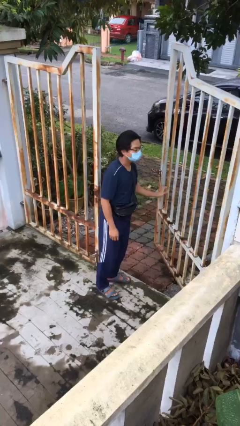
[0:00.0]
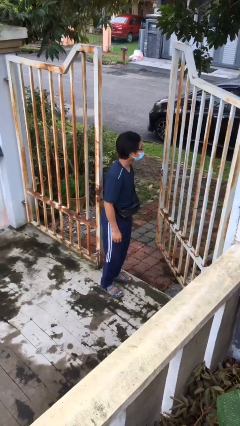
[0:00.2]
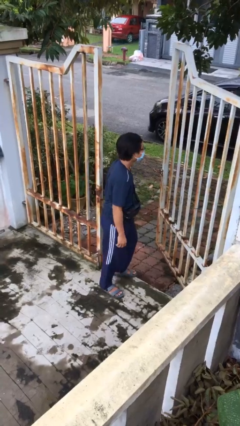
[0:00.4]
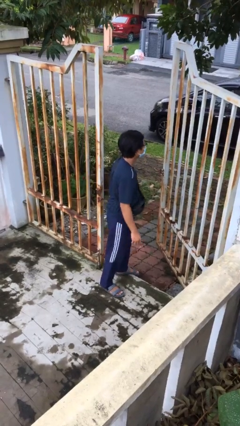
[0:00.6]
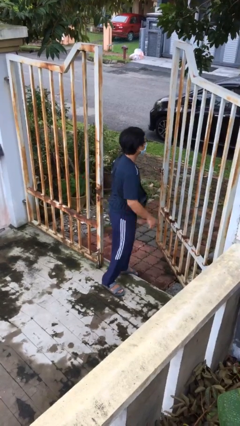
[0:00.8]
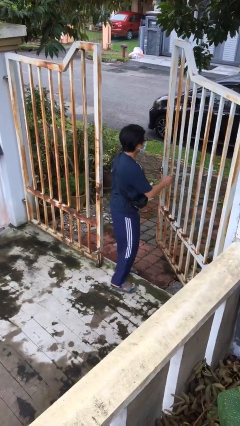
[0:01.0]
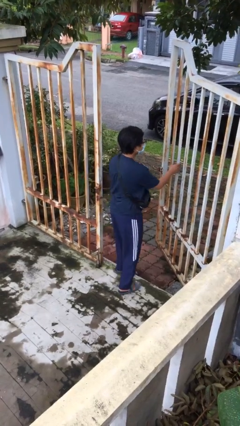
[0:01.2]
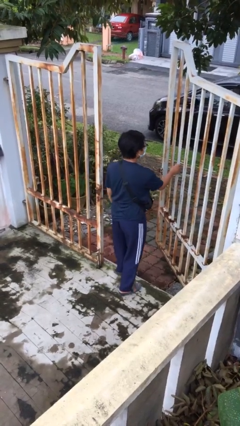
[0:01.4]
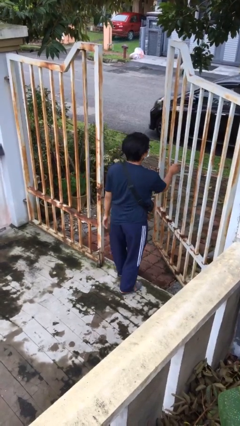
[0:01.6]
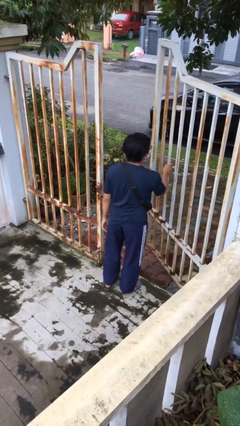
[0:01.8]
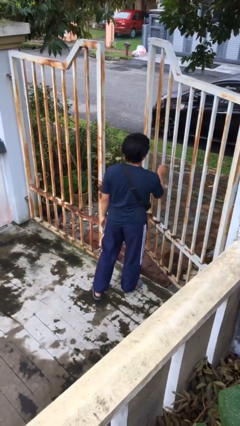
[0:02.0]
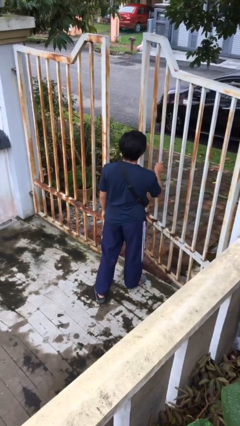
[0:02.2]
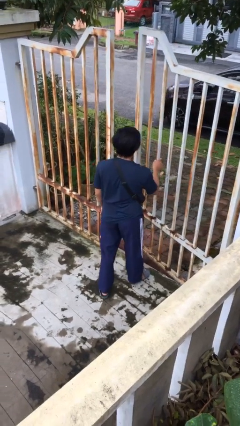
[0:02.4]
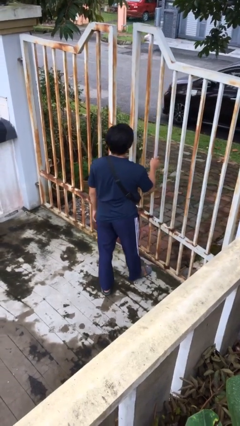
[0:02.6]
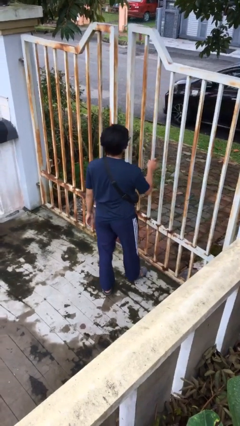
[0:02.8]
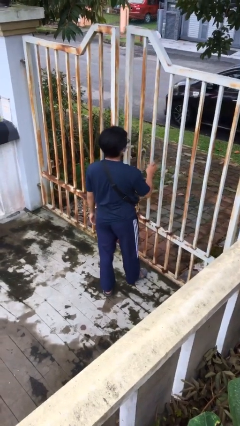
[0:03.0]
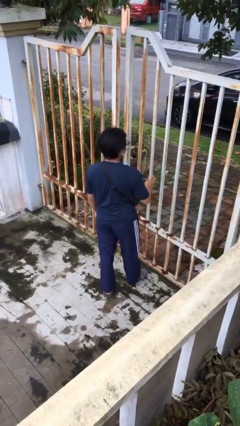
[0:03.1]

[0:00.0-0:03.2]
person closes facility door

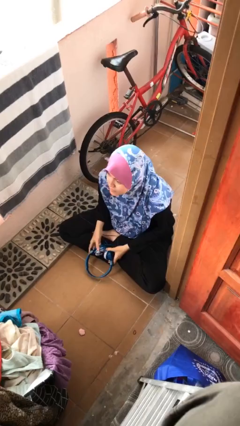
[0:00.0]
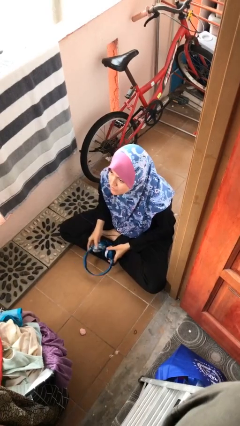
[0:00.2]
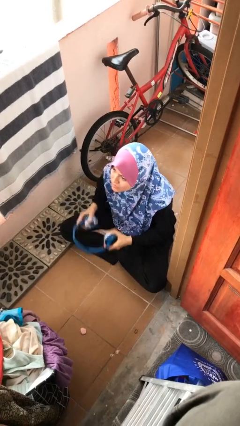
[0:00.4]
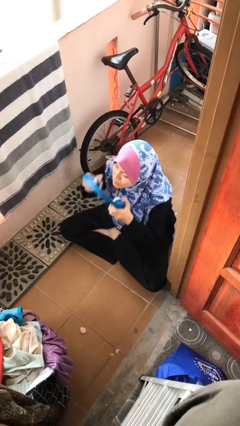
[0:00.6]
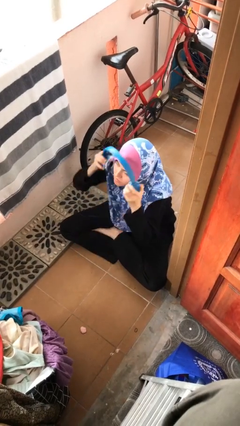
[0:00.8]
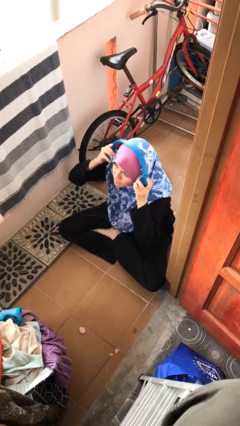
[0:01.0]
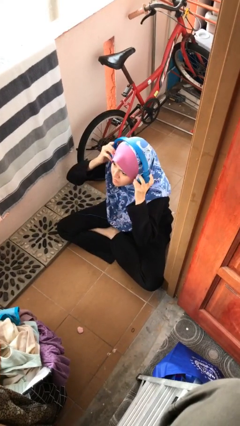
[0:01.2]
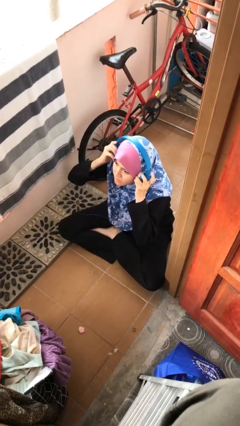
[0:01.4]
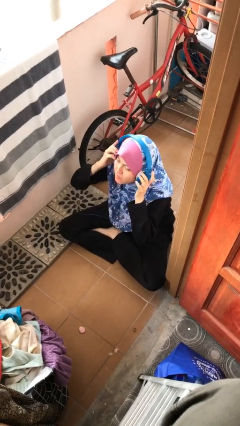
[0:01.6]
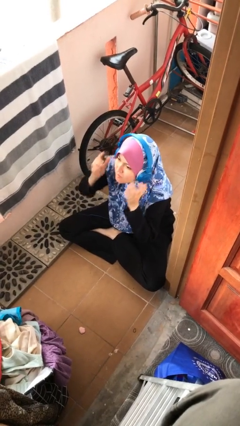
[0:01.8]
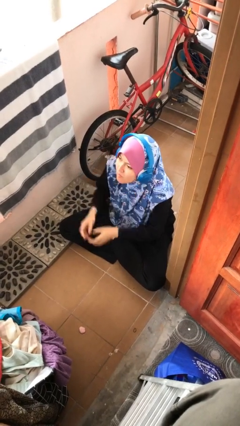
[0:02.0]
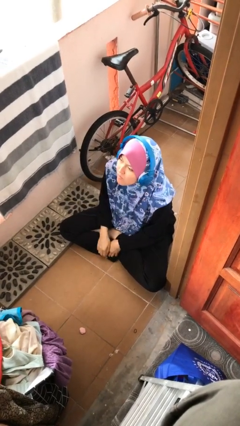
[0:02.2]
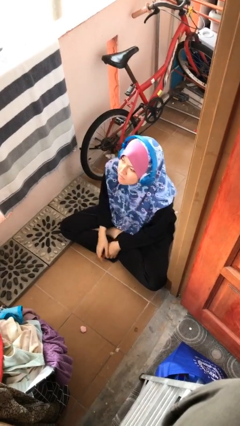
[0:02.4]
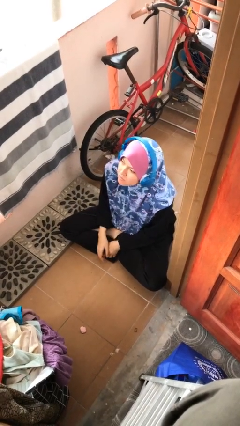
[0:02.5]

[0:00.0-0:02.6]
person puts on headphones

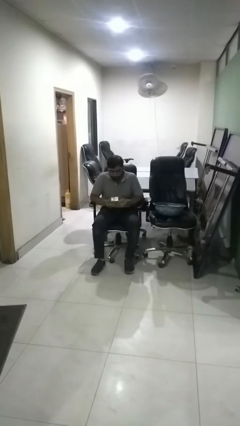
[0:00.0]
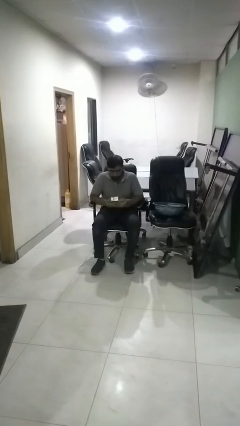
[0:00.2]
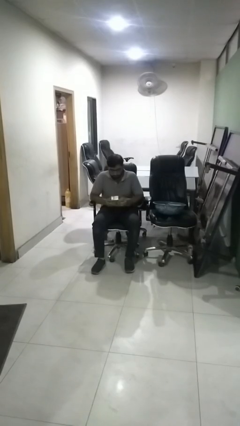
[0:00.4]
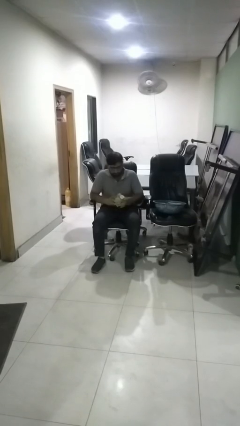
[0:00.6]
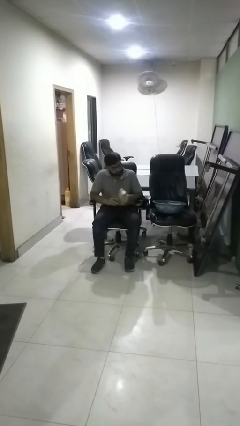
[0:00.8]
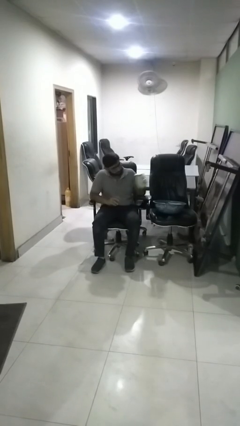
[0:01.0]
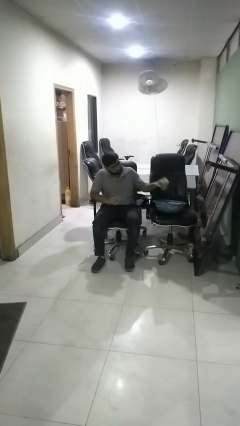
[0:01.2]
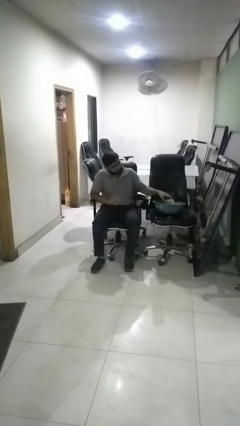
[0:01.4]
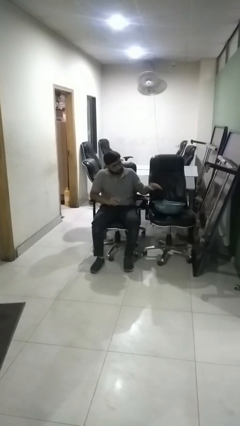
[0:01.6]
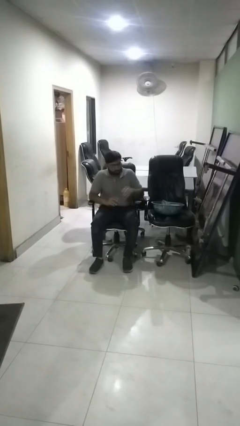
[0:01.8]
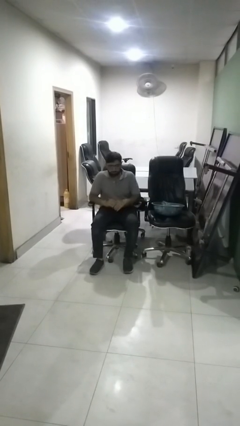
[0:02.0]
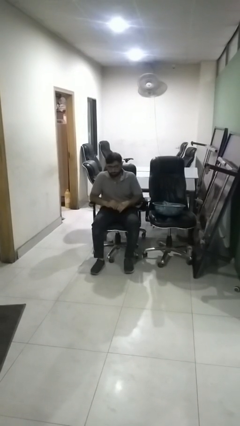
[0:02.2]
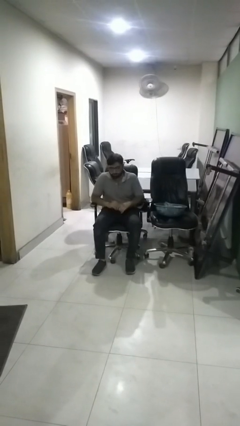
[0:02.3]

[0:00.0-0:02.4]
person puts object into basket

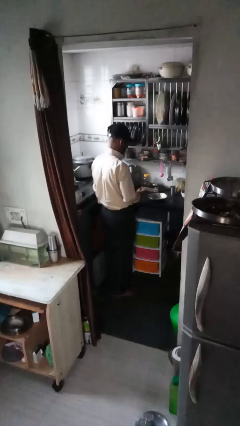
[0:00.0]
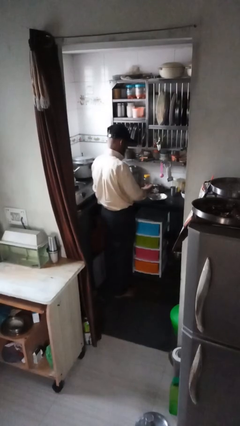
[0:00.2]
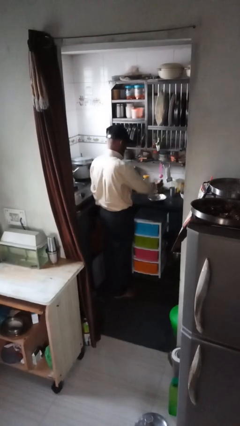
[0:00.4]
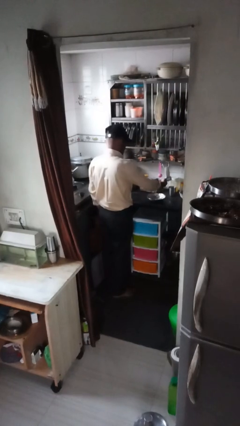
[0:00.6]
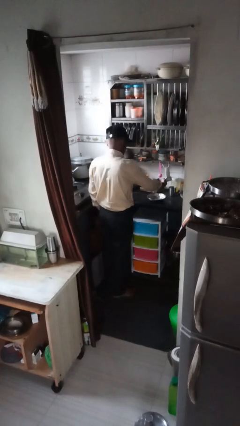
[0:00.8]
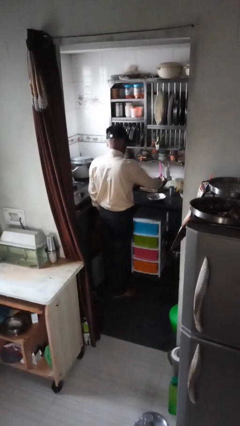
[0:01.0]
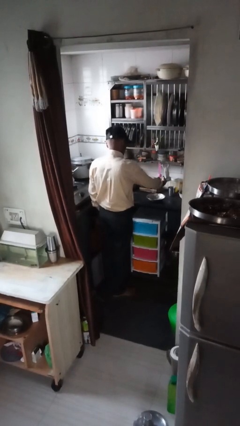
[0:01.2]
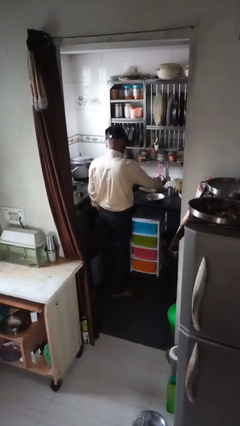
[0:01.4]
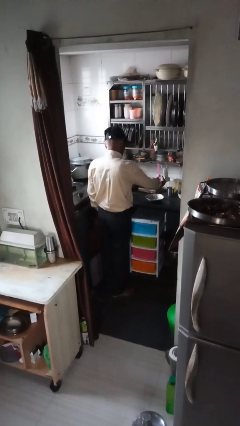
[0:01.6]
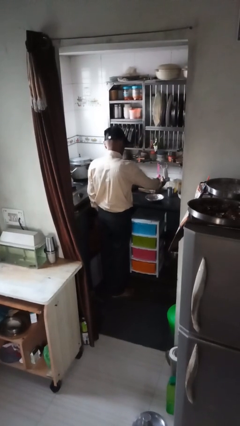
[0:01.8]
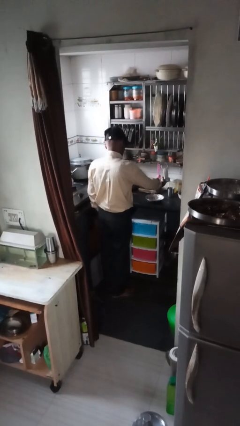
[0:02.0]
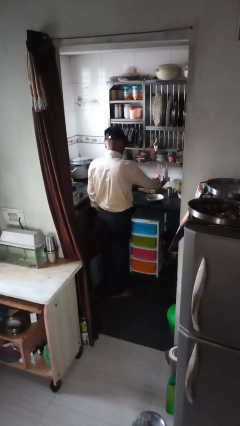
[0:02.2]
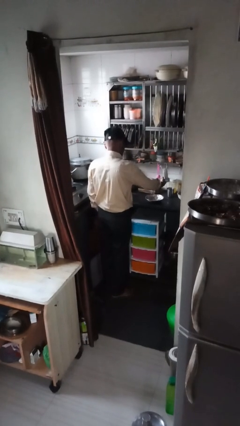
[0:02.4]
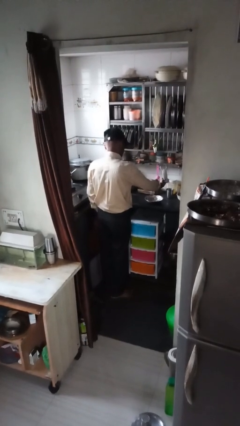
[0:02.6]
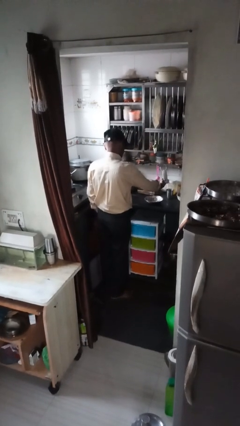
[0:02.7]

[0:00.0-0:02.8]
person pours into bowl

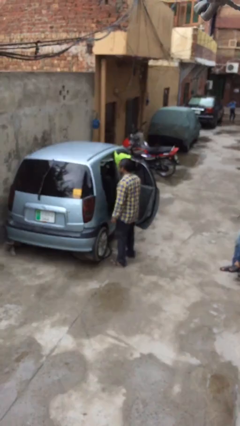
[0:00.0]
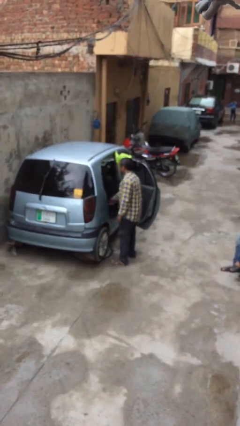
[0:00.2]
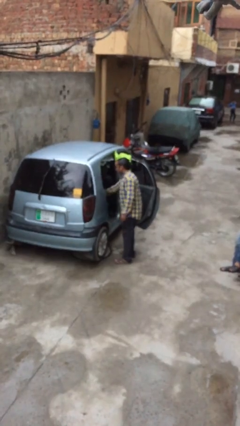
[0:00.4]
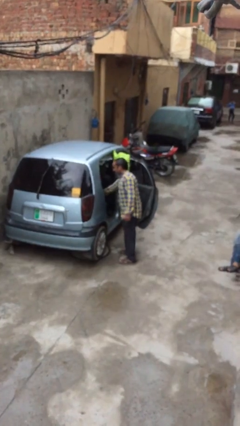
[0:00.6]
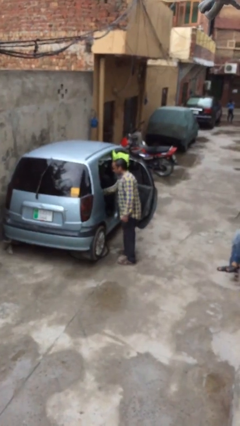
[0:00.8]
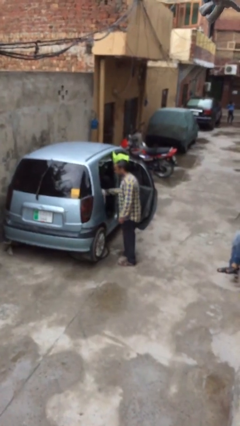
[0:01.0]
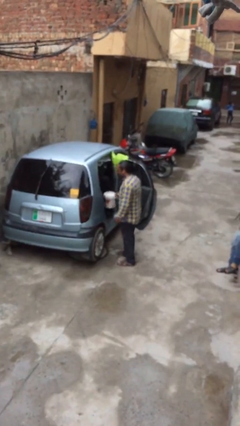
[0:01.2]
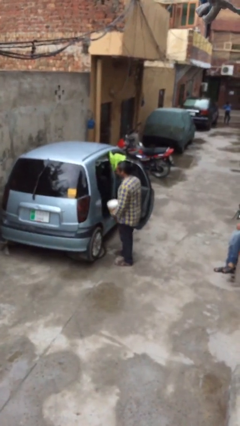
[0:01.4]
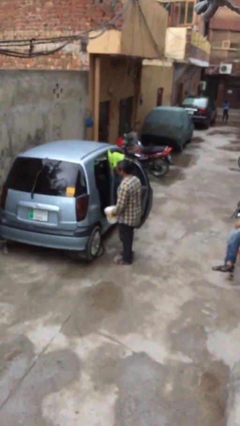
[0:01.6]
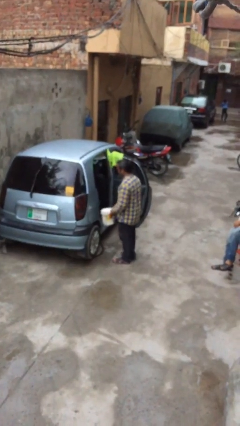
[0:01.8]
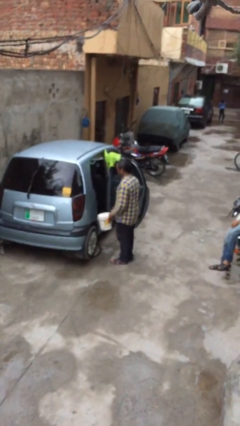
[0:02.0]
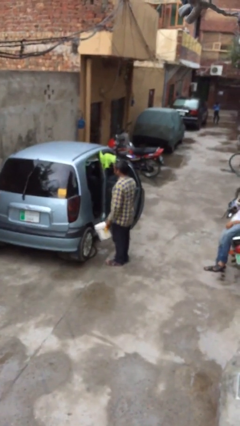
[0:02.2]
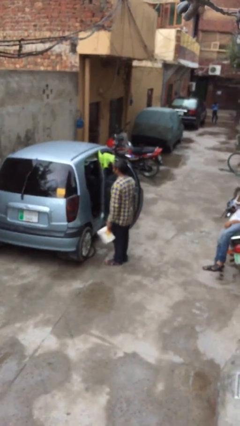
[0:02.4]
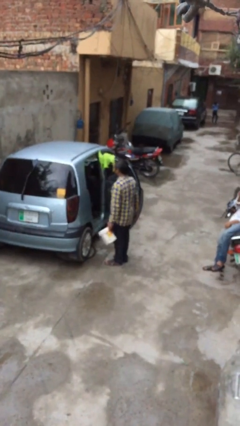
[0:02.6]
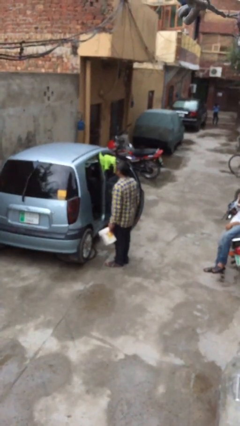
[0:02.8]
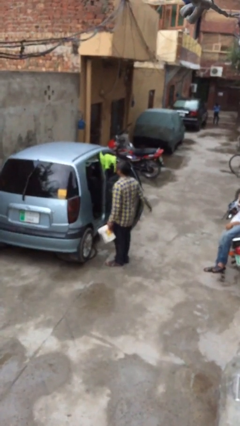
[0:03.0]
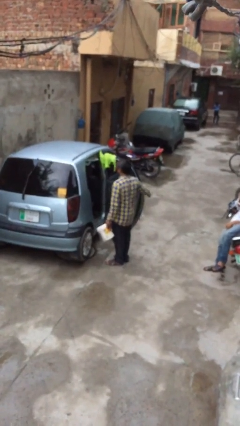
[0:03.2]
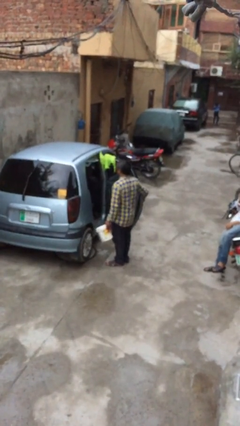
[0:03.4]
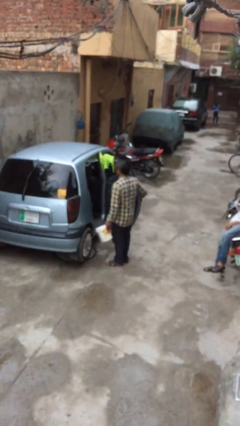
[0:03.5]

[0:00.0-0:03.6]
person unloads car

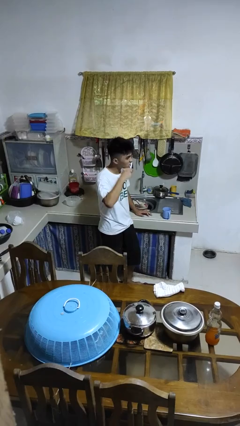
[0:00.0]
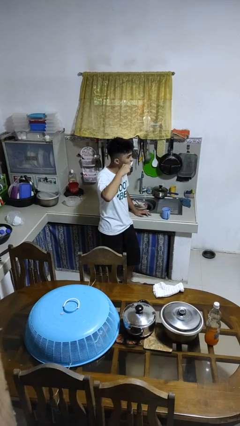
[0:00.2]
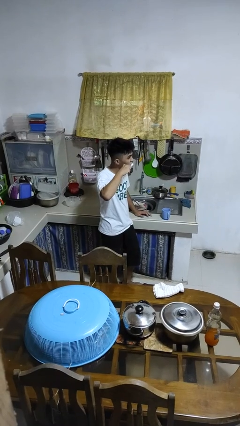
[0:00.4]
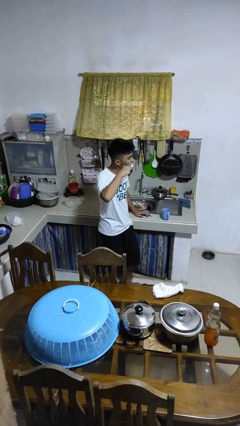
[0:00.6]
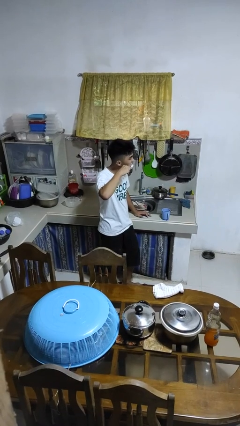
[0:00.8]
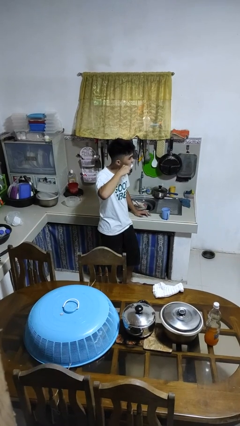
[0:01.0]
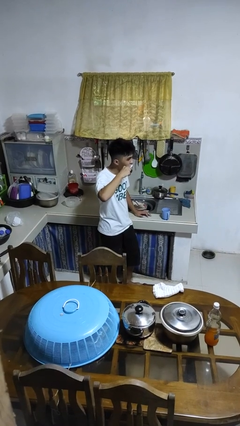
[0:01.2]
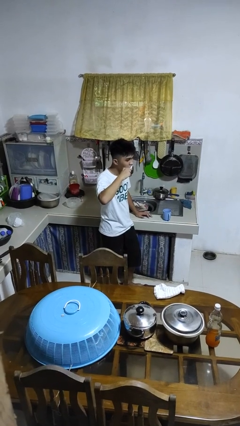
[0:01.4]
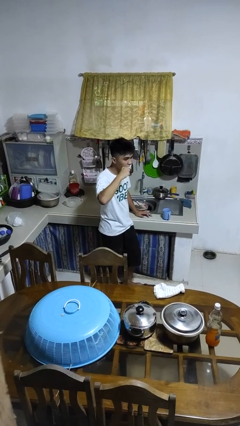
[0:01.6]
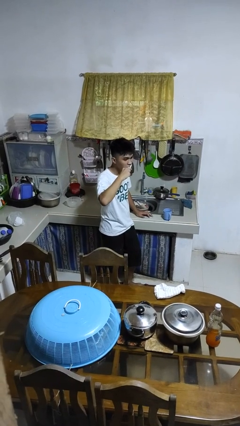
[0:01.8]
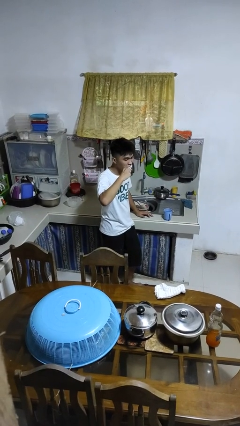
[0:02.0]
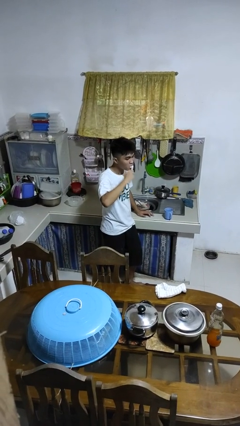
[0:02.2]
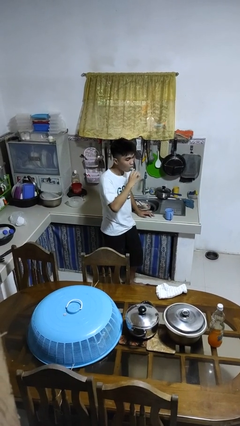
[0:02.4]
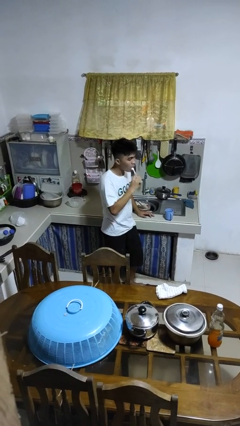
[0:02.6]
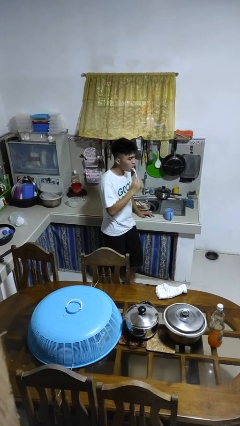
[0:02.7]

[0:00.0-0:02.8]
person brushes teeth
